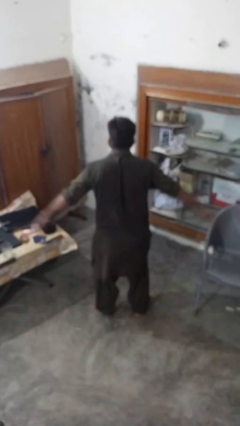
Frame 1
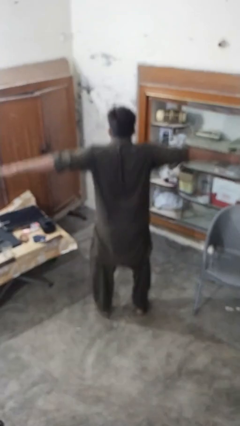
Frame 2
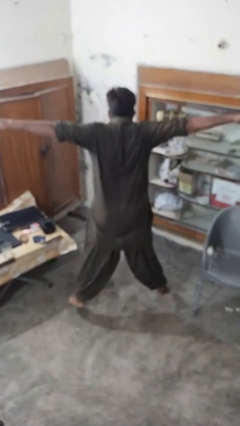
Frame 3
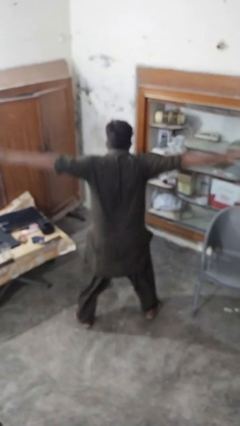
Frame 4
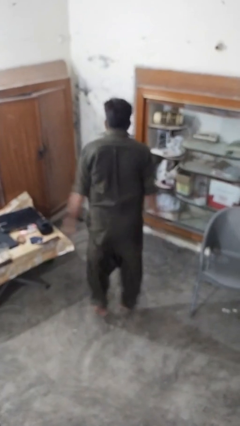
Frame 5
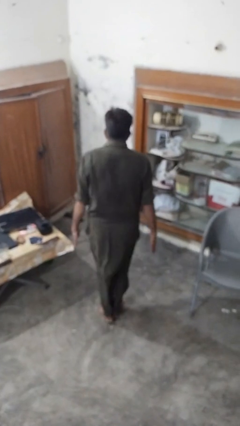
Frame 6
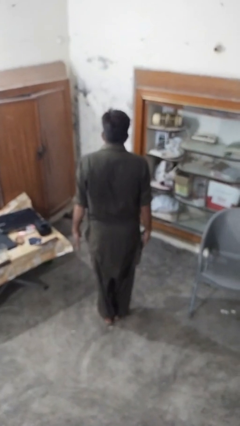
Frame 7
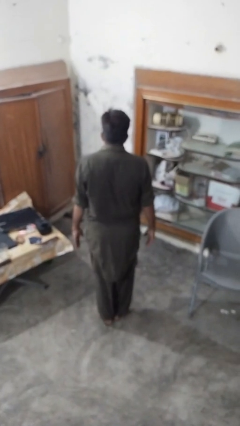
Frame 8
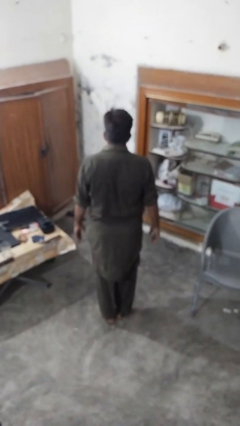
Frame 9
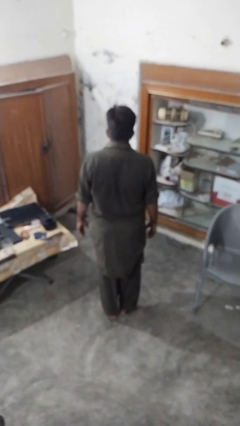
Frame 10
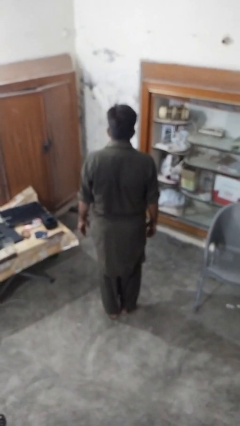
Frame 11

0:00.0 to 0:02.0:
person exercises with jumping jacks

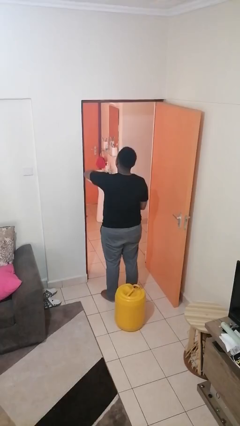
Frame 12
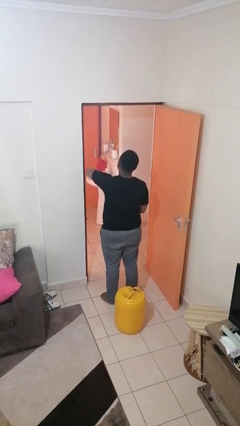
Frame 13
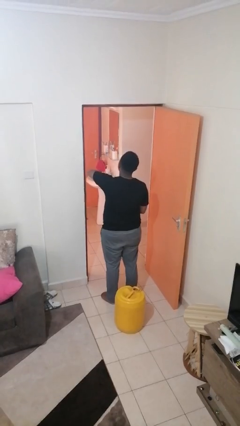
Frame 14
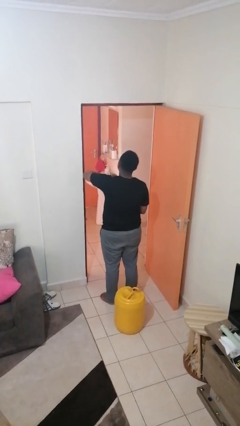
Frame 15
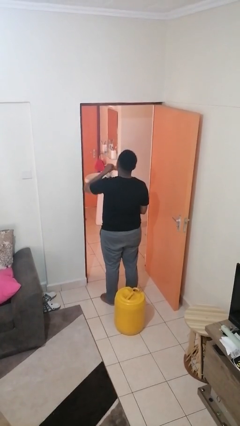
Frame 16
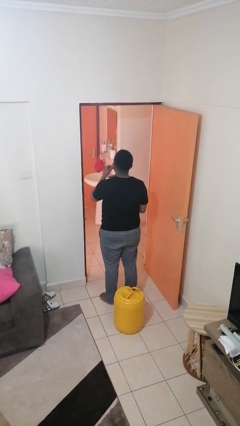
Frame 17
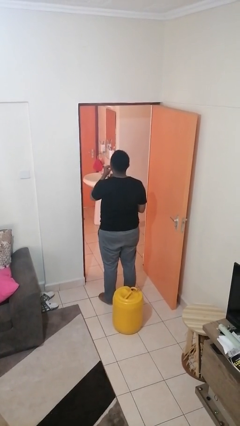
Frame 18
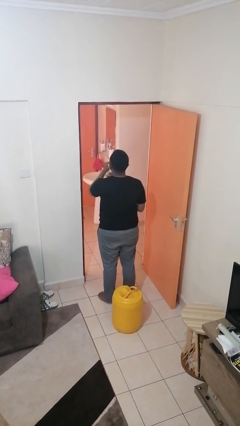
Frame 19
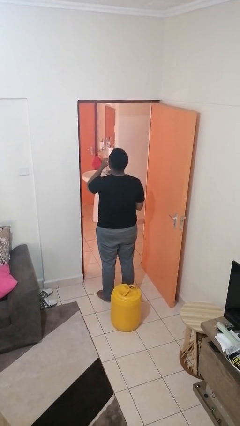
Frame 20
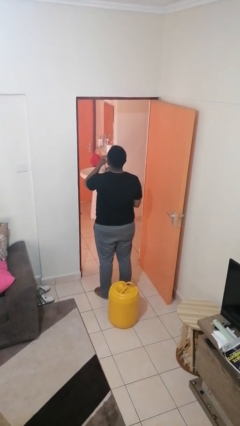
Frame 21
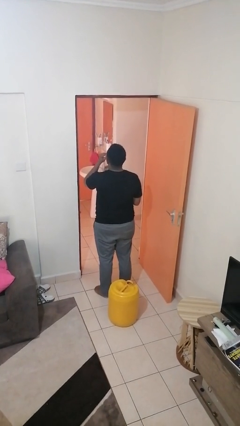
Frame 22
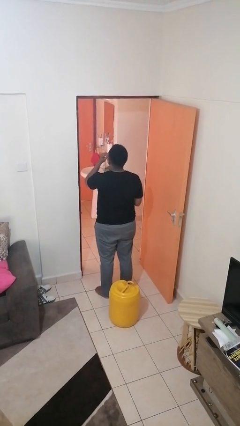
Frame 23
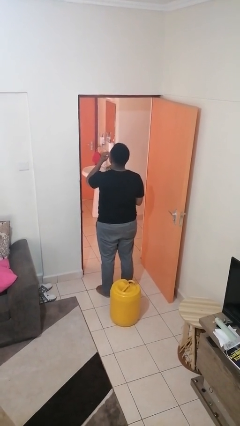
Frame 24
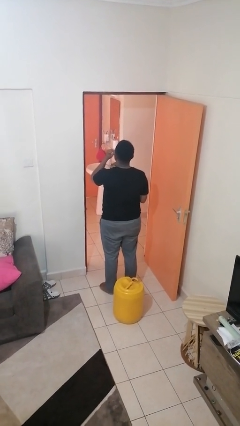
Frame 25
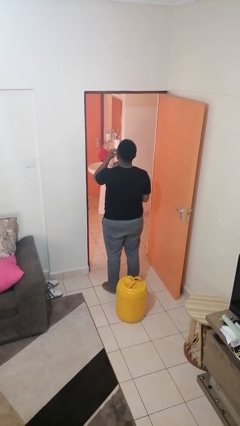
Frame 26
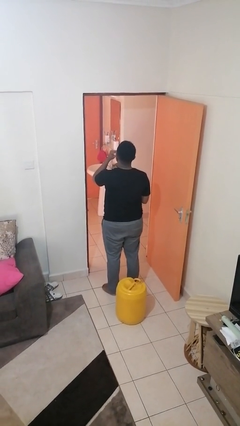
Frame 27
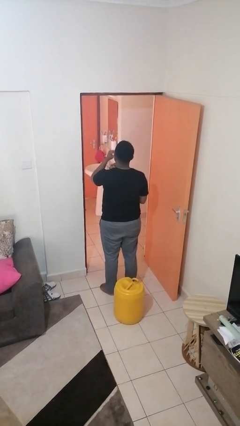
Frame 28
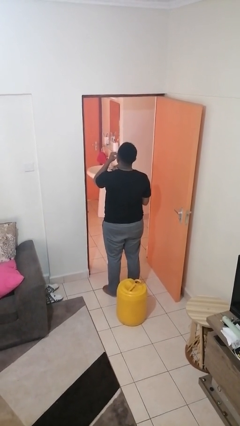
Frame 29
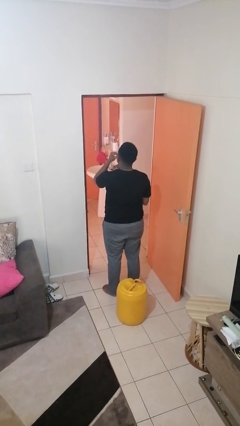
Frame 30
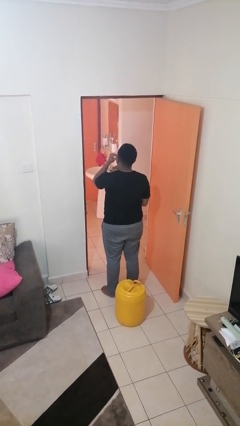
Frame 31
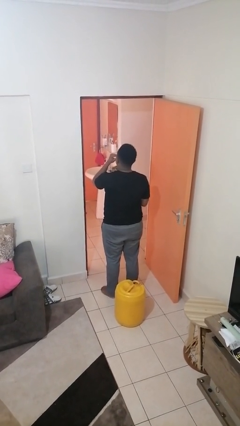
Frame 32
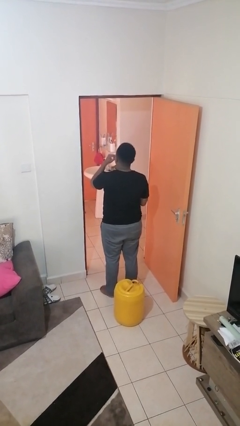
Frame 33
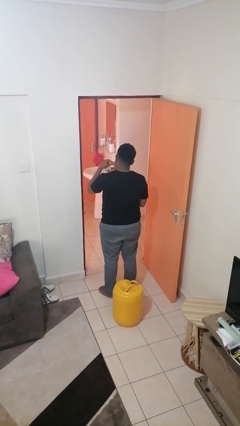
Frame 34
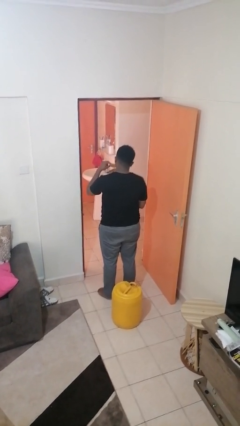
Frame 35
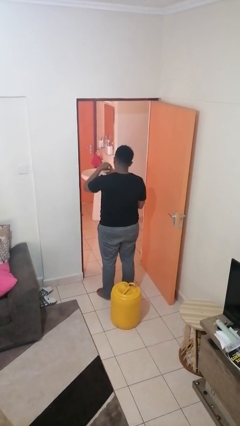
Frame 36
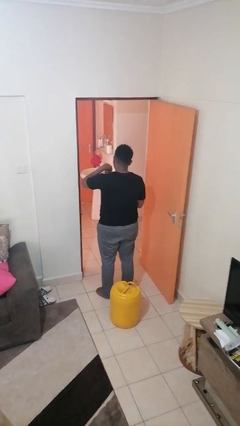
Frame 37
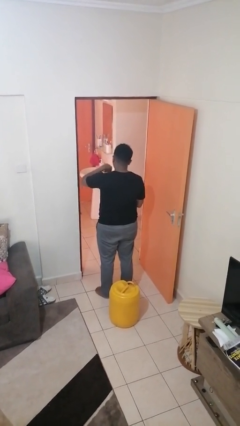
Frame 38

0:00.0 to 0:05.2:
person eats snack from bag

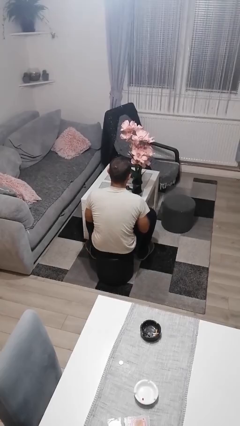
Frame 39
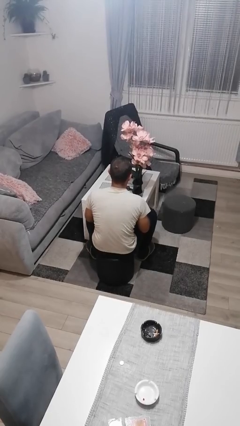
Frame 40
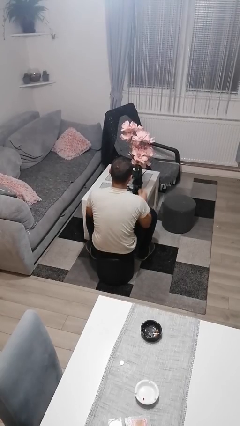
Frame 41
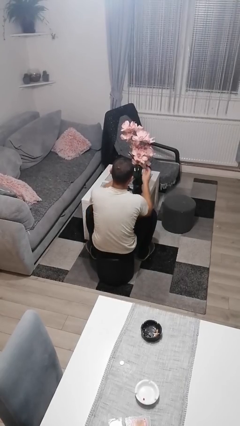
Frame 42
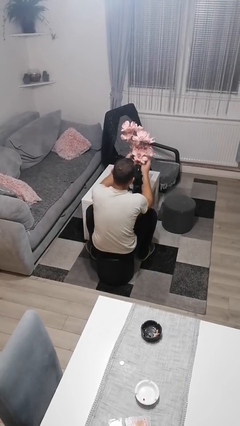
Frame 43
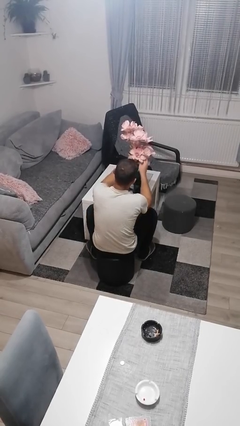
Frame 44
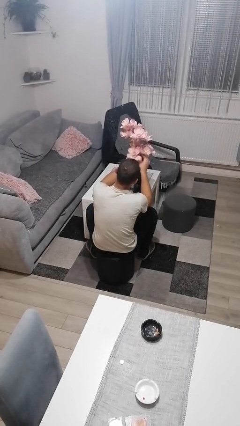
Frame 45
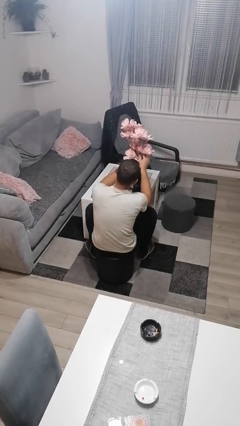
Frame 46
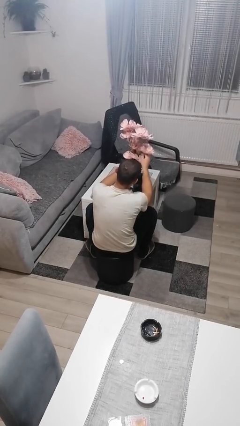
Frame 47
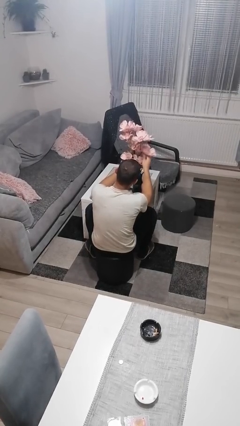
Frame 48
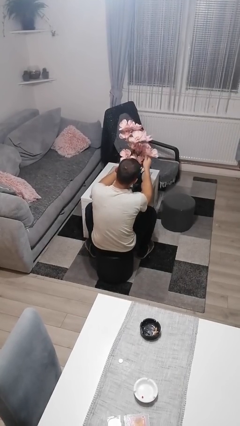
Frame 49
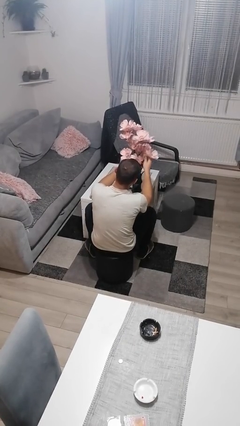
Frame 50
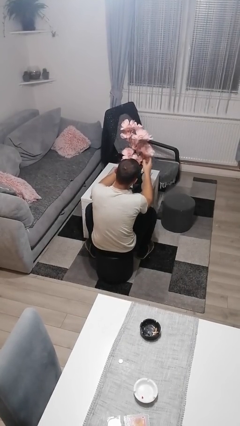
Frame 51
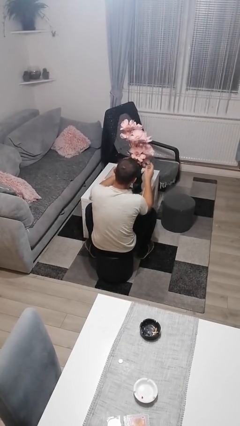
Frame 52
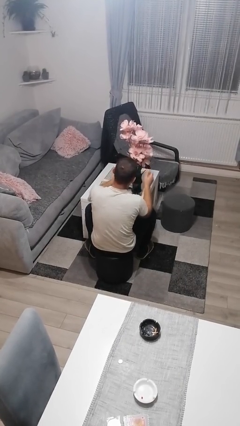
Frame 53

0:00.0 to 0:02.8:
person arranges flowers in vase

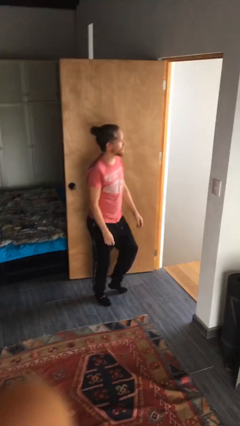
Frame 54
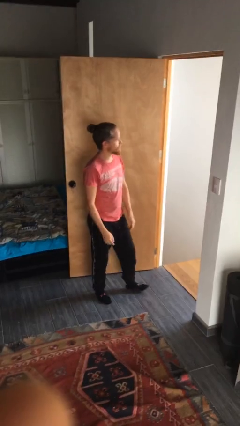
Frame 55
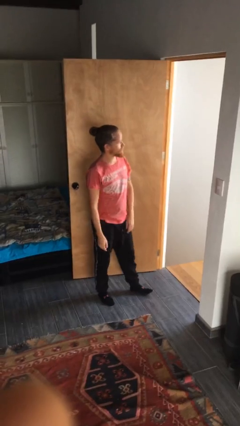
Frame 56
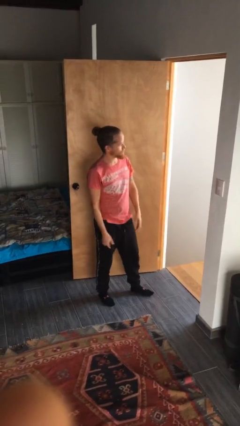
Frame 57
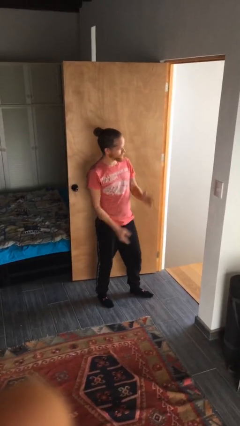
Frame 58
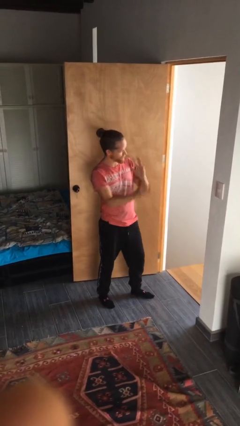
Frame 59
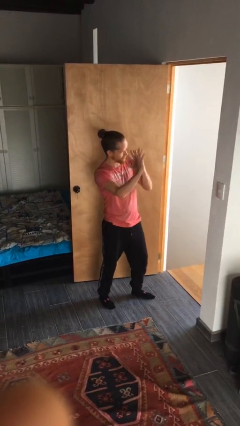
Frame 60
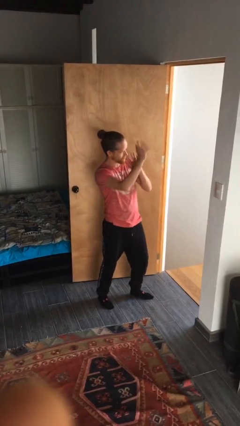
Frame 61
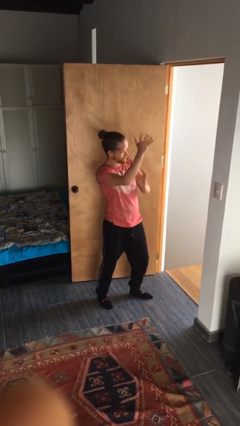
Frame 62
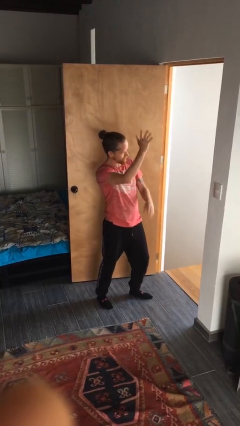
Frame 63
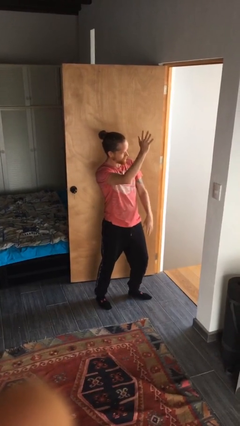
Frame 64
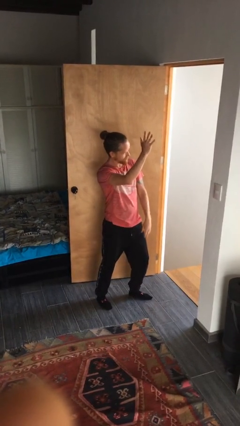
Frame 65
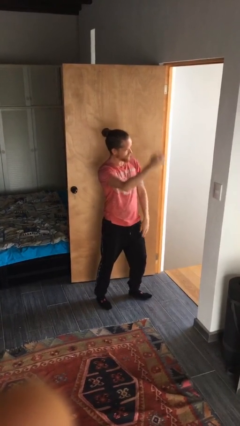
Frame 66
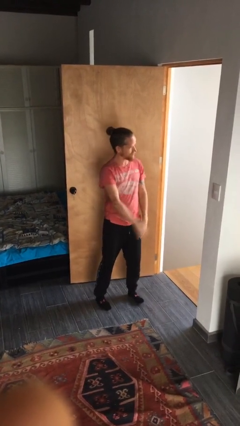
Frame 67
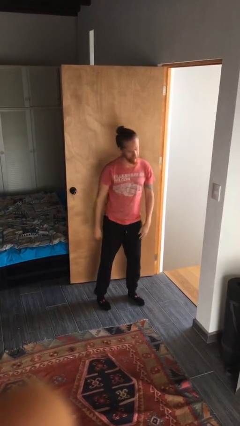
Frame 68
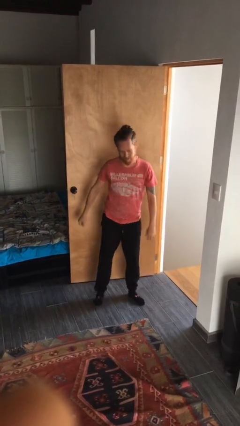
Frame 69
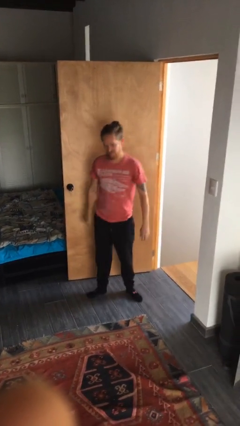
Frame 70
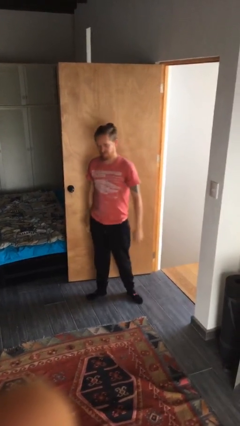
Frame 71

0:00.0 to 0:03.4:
person waves at person

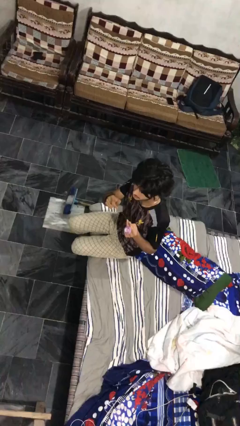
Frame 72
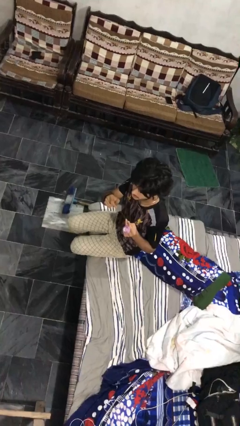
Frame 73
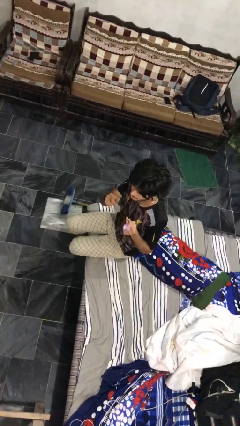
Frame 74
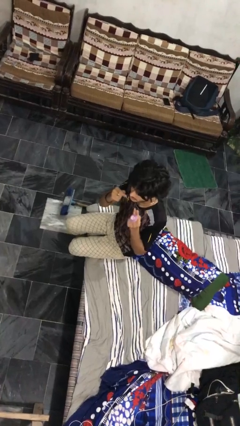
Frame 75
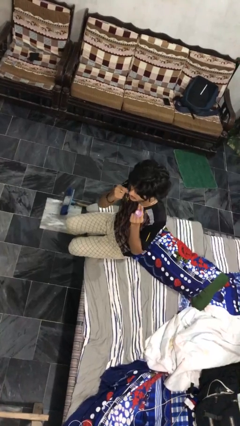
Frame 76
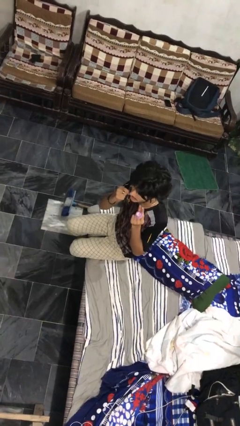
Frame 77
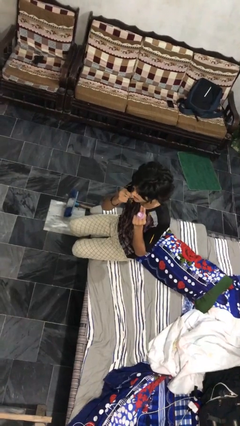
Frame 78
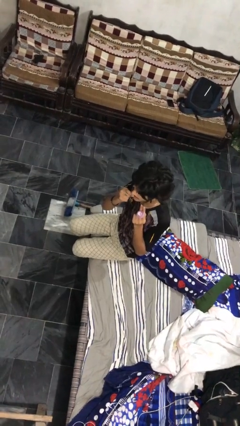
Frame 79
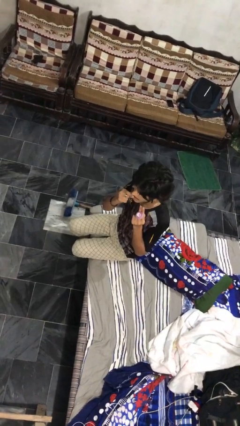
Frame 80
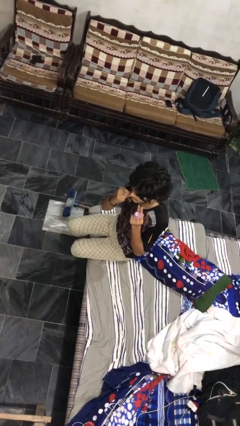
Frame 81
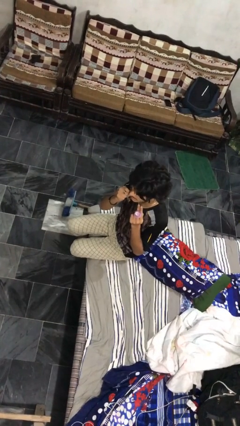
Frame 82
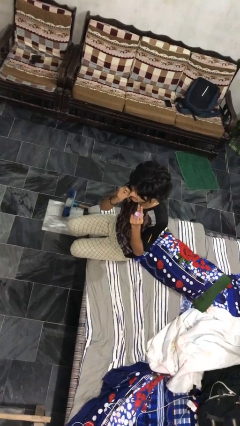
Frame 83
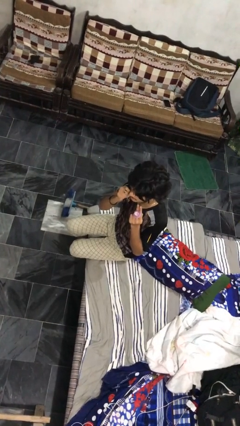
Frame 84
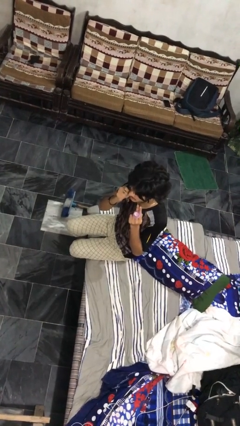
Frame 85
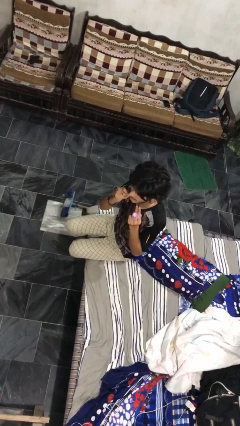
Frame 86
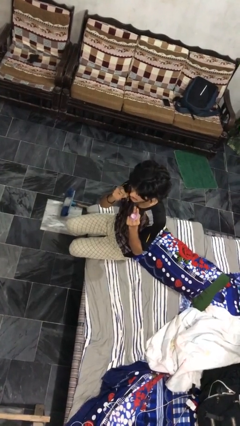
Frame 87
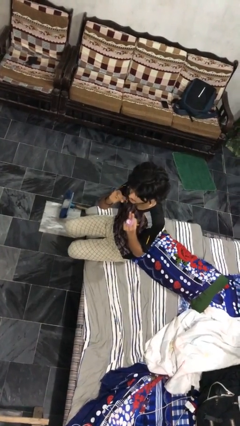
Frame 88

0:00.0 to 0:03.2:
person flosses

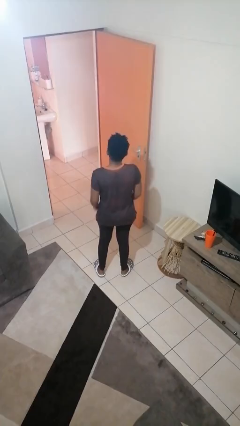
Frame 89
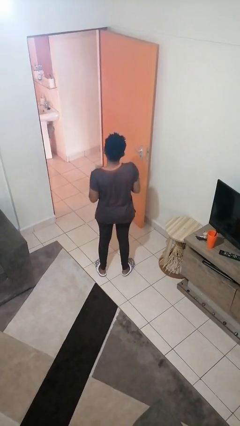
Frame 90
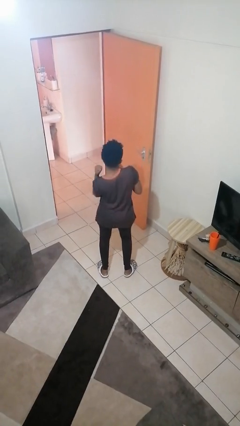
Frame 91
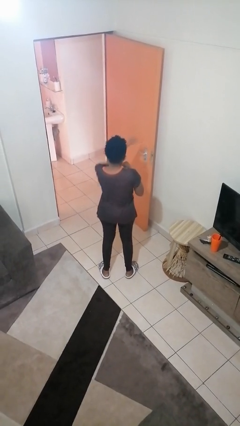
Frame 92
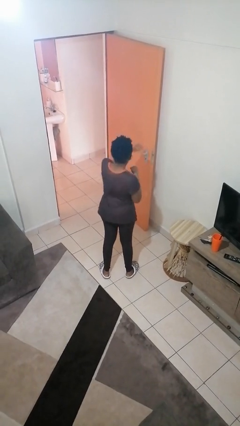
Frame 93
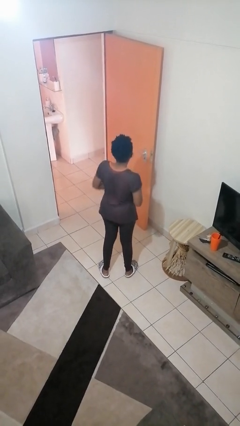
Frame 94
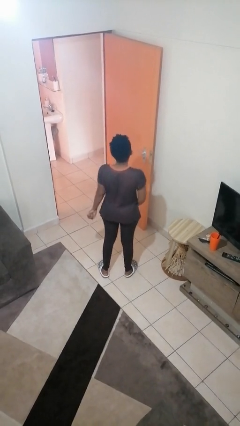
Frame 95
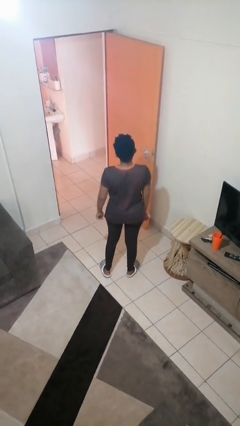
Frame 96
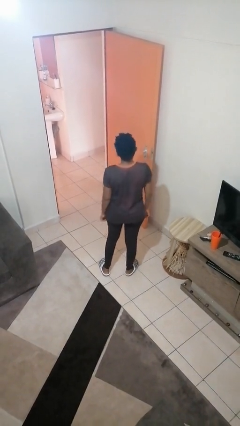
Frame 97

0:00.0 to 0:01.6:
person punches
